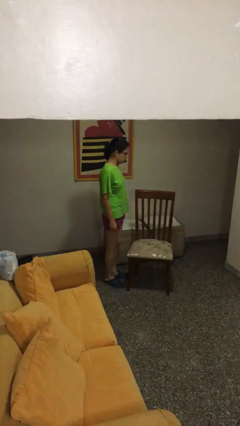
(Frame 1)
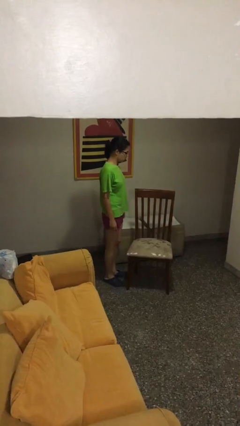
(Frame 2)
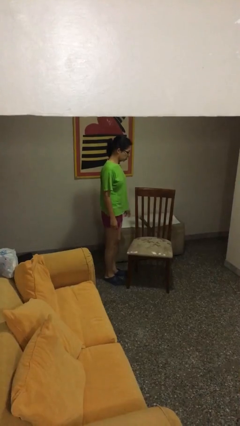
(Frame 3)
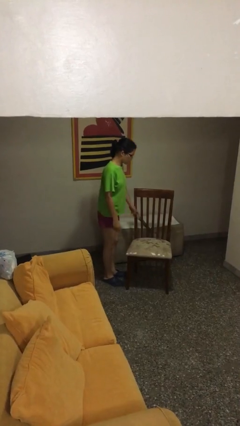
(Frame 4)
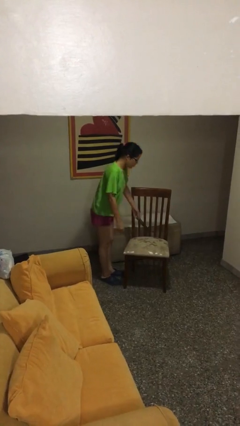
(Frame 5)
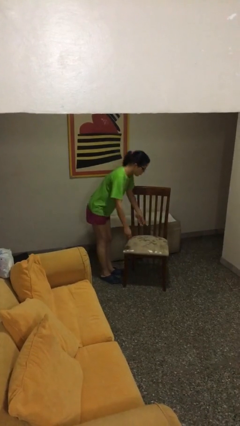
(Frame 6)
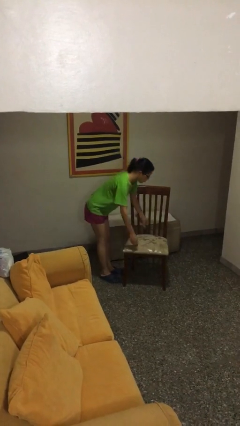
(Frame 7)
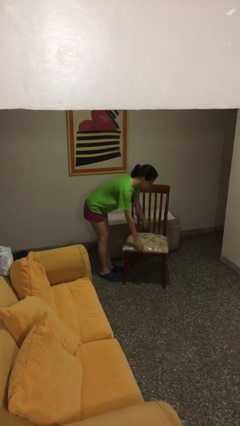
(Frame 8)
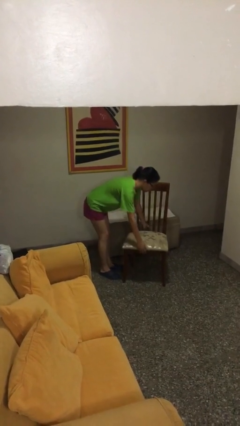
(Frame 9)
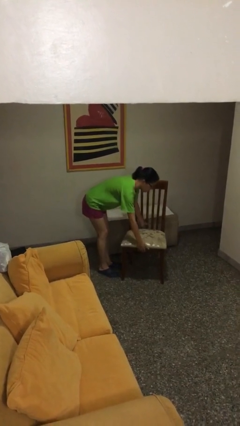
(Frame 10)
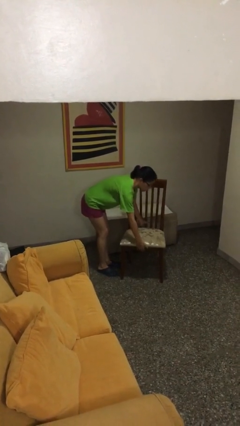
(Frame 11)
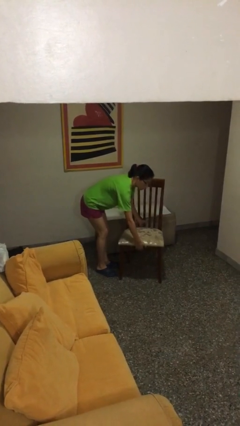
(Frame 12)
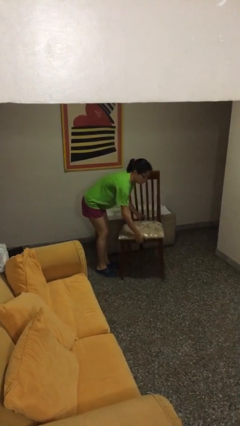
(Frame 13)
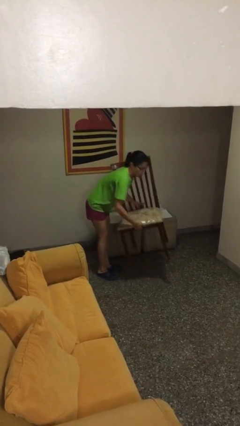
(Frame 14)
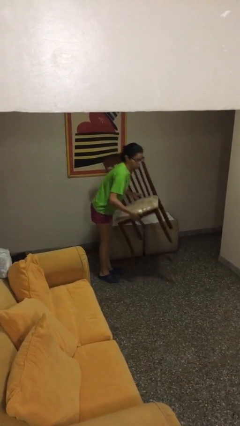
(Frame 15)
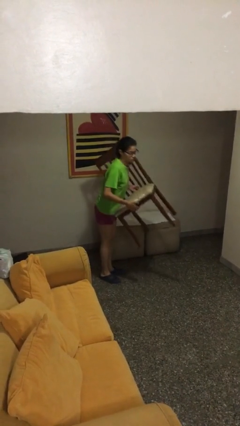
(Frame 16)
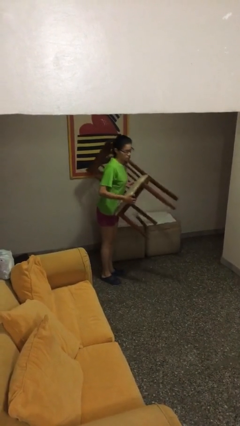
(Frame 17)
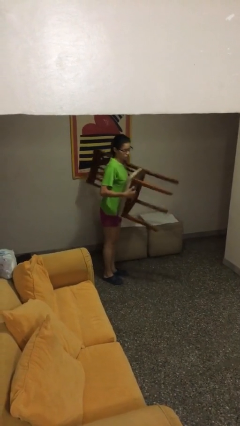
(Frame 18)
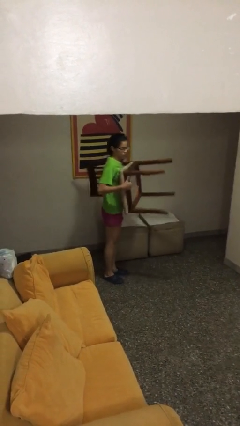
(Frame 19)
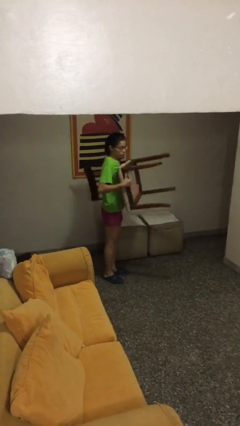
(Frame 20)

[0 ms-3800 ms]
person picks up object from floor

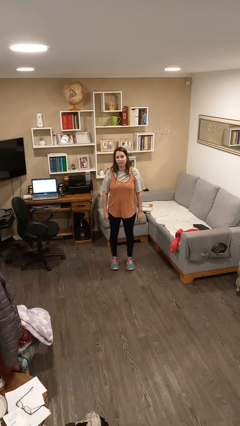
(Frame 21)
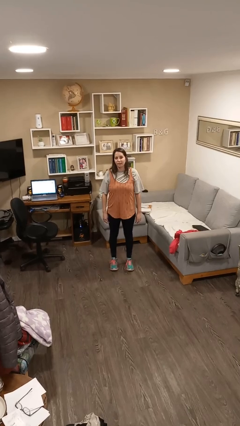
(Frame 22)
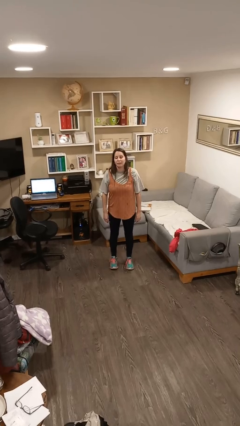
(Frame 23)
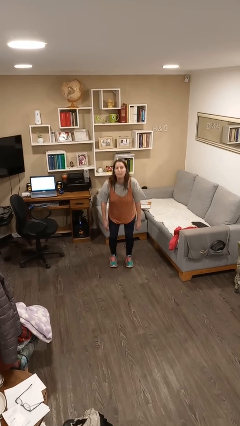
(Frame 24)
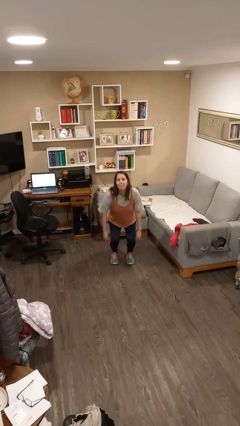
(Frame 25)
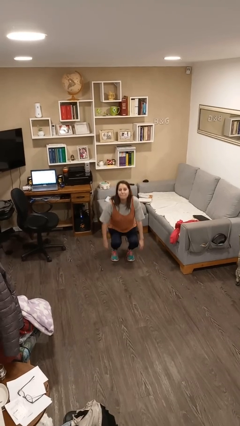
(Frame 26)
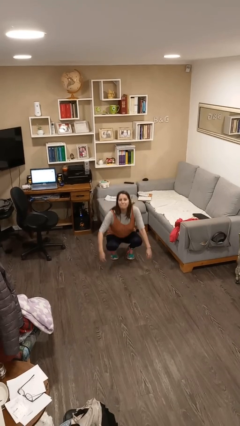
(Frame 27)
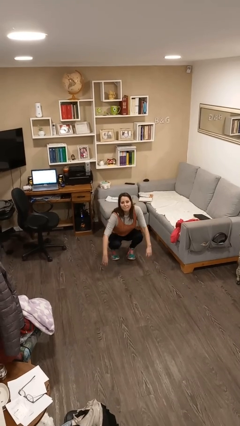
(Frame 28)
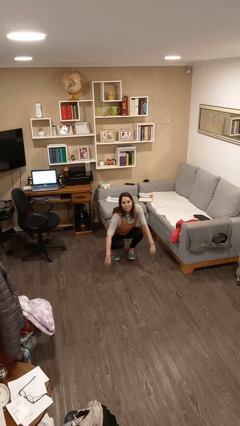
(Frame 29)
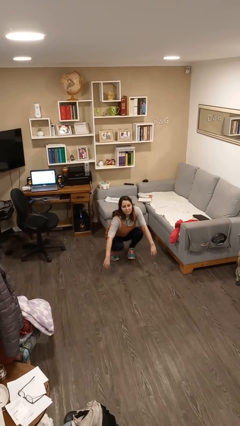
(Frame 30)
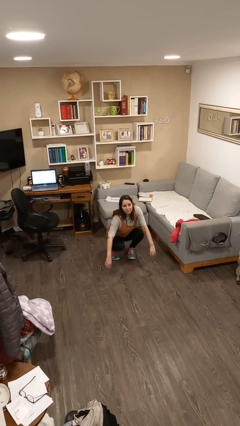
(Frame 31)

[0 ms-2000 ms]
person squats

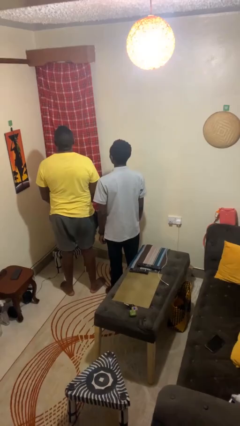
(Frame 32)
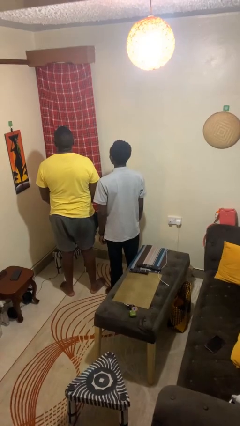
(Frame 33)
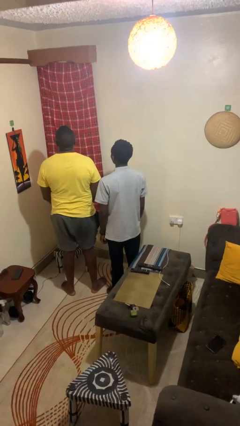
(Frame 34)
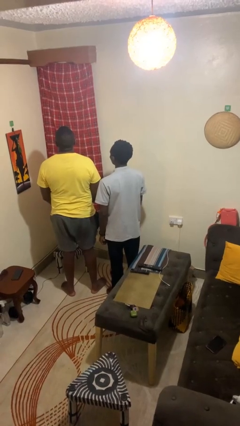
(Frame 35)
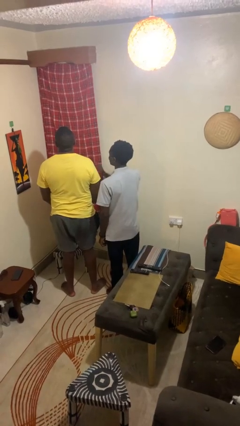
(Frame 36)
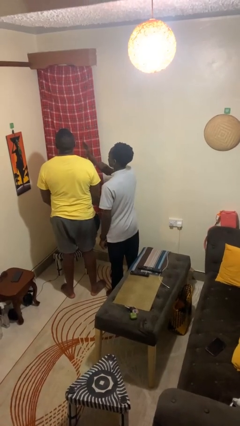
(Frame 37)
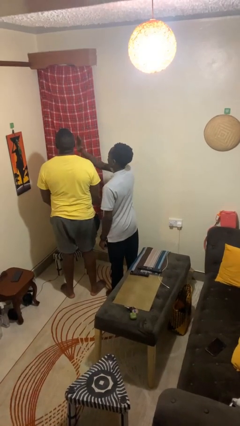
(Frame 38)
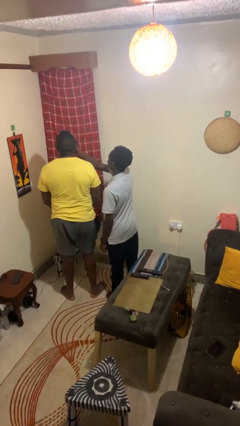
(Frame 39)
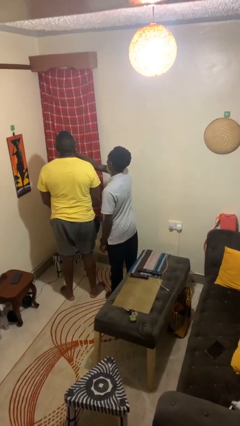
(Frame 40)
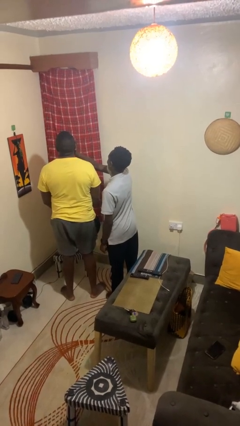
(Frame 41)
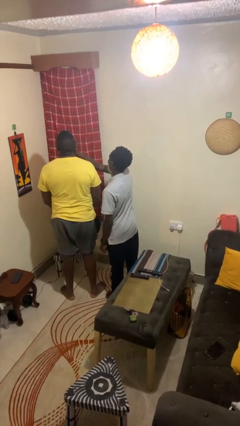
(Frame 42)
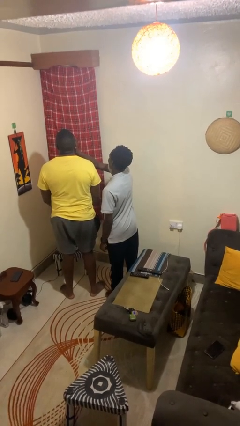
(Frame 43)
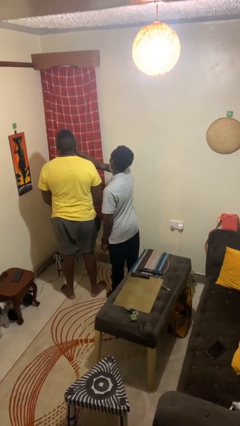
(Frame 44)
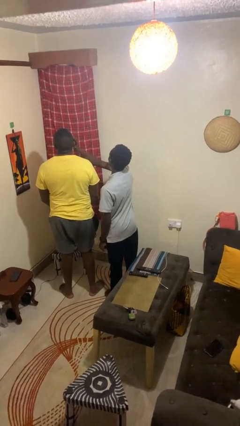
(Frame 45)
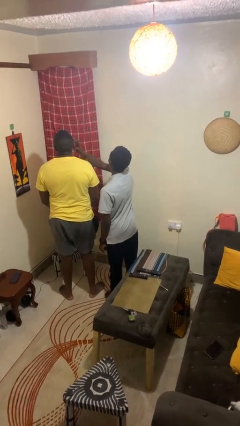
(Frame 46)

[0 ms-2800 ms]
person touches face of person

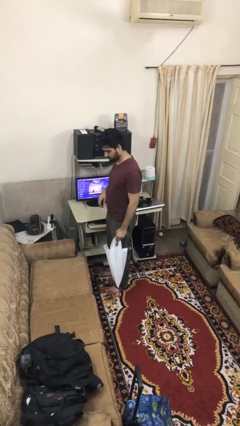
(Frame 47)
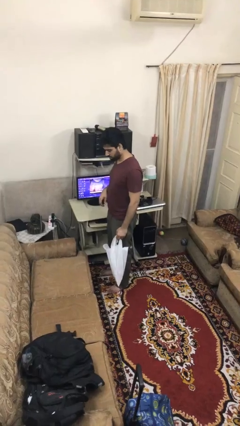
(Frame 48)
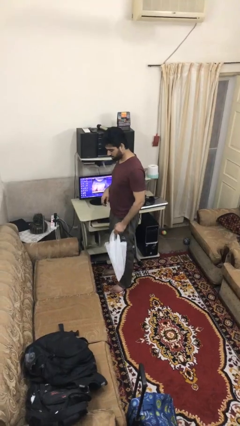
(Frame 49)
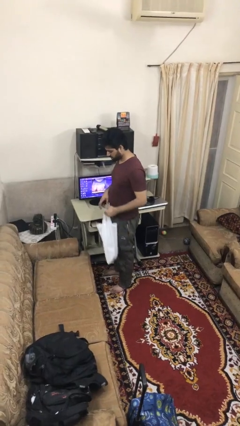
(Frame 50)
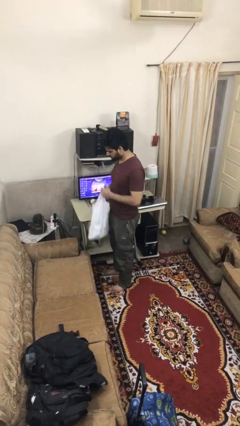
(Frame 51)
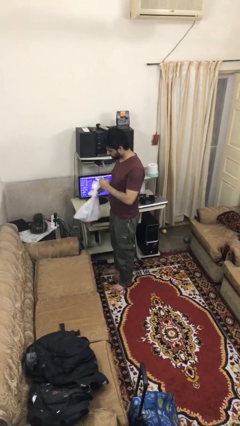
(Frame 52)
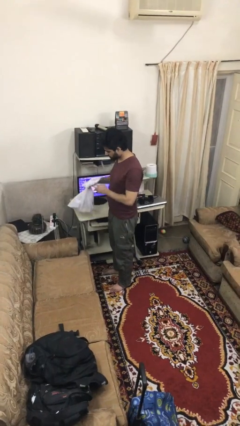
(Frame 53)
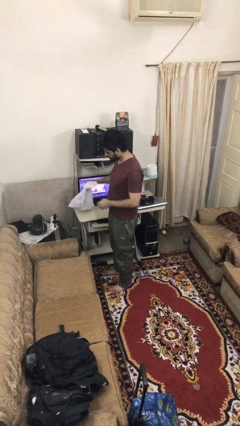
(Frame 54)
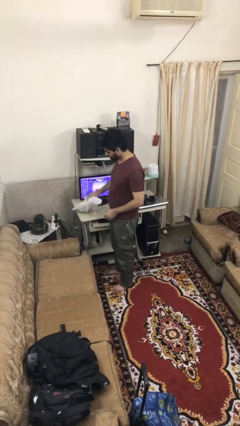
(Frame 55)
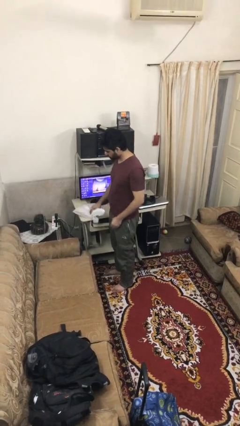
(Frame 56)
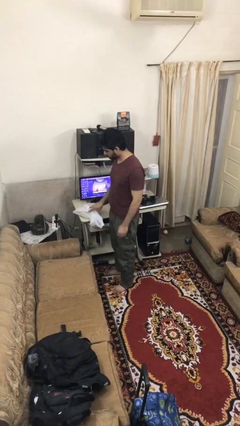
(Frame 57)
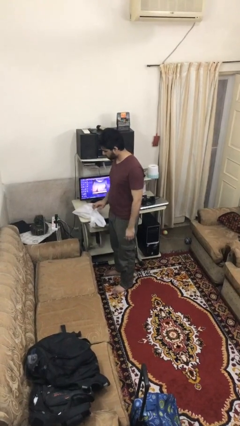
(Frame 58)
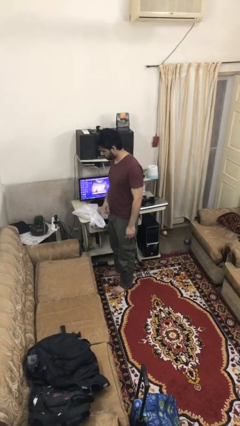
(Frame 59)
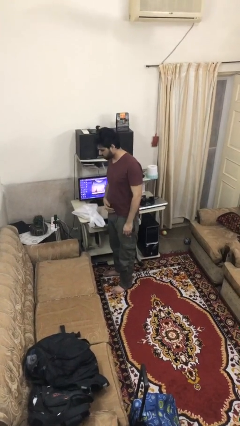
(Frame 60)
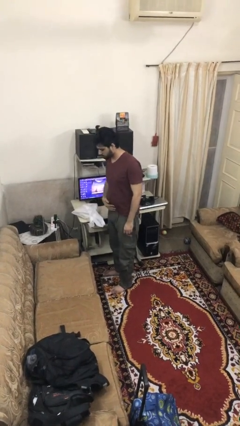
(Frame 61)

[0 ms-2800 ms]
person puts down object on table

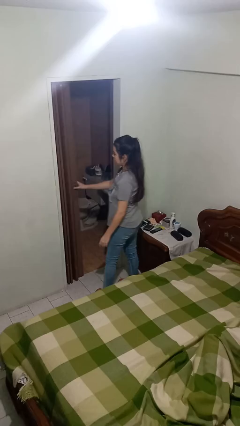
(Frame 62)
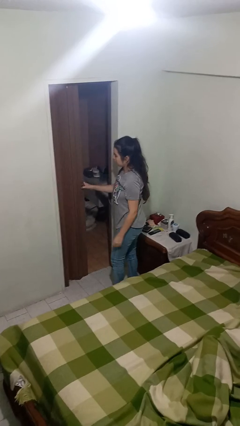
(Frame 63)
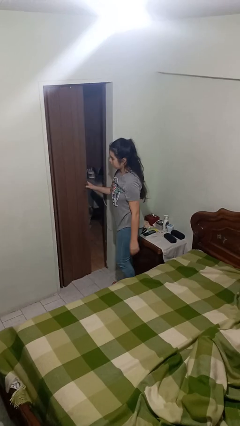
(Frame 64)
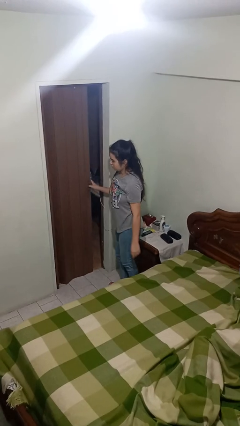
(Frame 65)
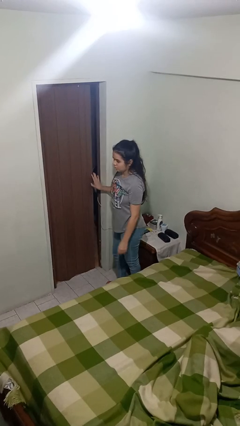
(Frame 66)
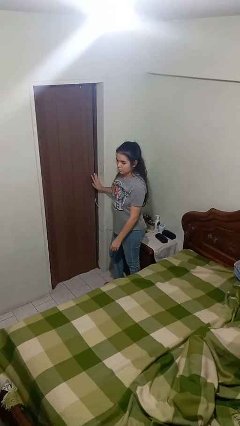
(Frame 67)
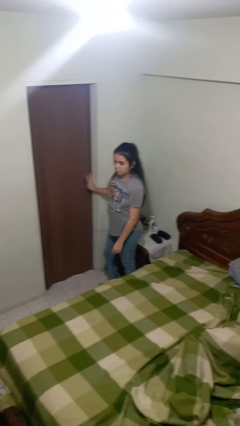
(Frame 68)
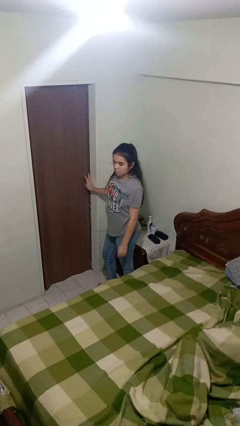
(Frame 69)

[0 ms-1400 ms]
person closes sliding door

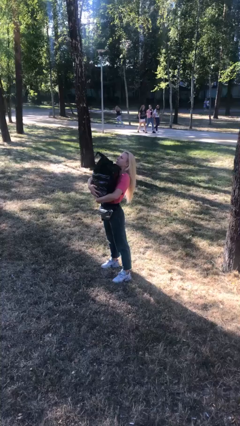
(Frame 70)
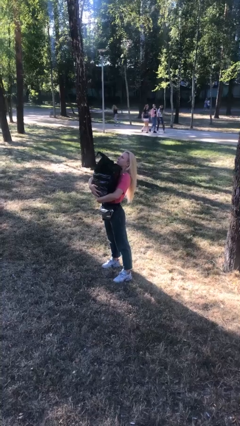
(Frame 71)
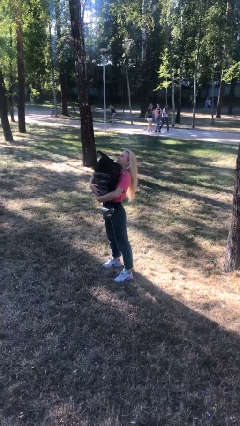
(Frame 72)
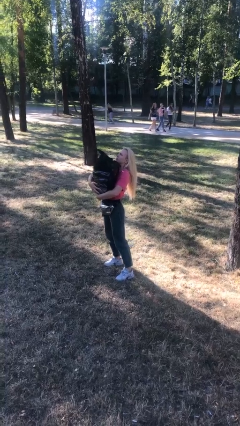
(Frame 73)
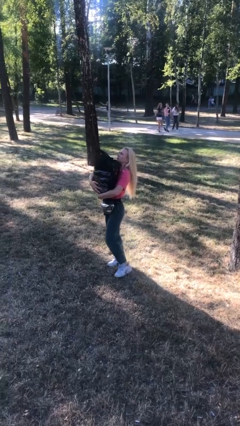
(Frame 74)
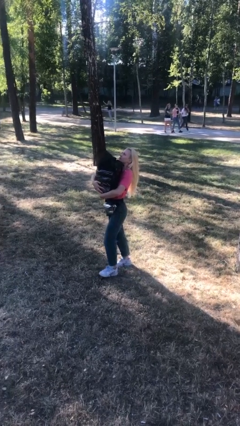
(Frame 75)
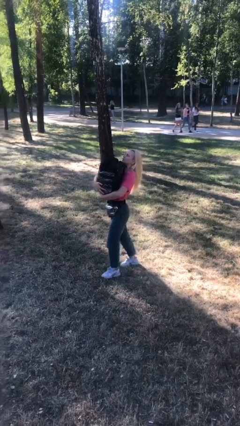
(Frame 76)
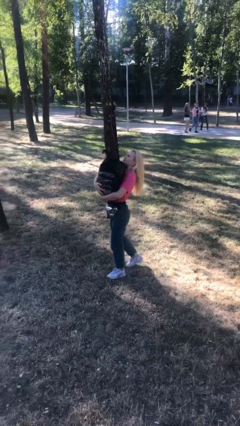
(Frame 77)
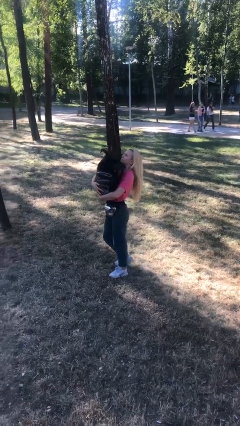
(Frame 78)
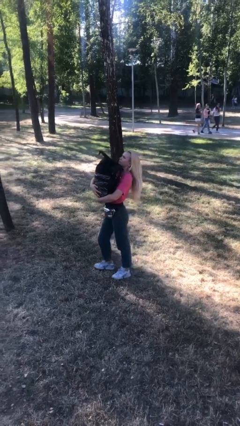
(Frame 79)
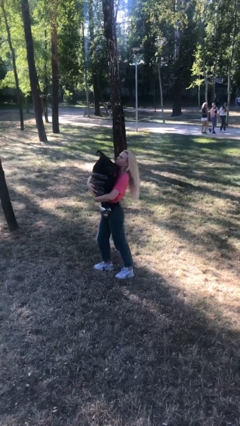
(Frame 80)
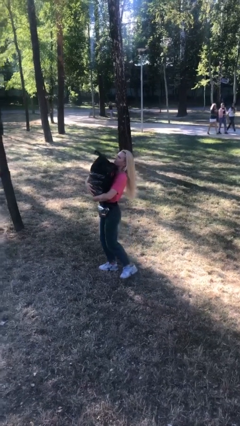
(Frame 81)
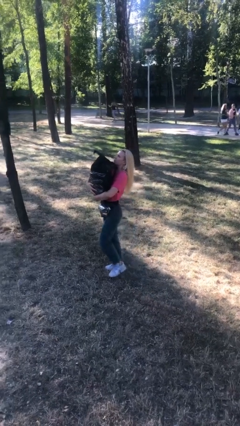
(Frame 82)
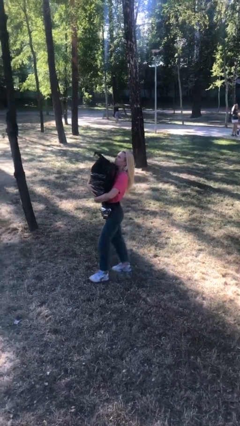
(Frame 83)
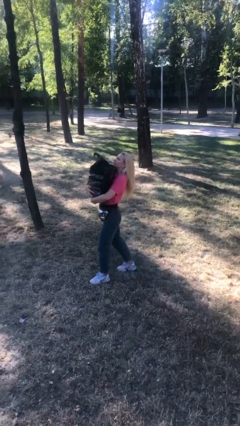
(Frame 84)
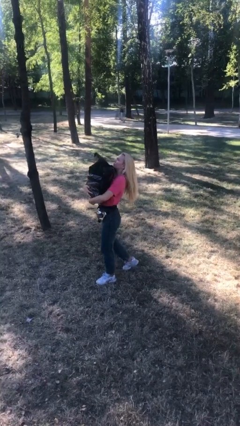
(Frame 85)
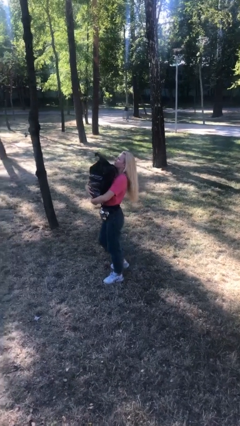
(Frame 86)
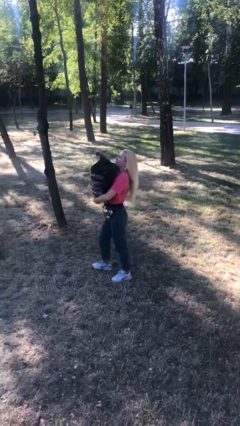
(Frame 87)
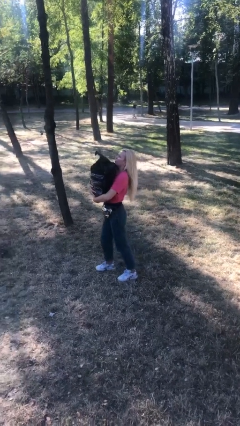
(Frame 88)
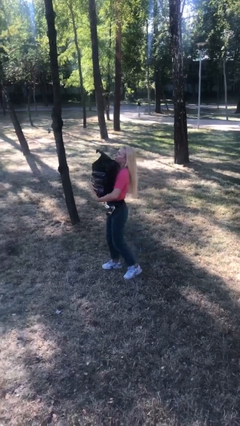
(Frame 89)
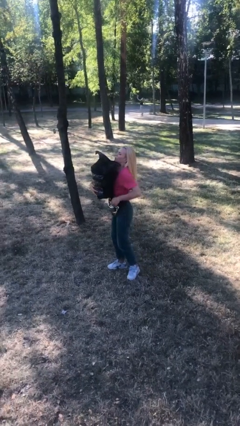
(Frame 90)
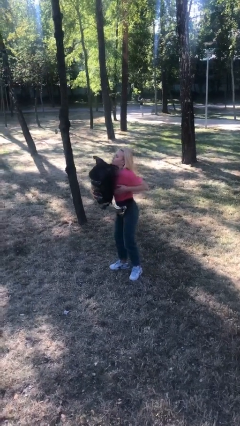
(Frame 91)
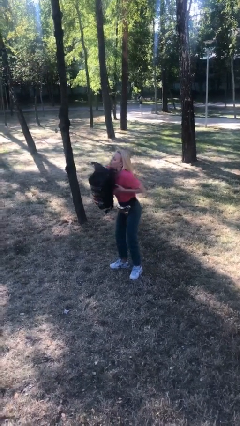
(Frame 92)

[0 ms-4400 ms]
person carries heavy object
